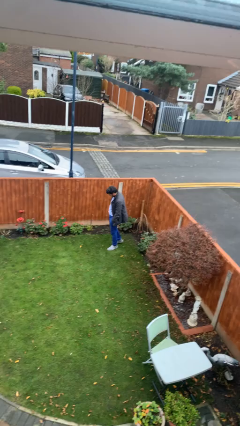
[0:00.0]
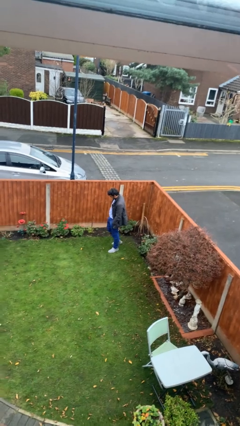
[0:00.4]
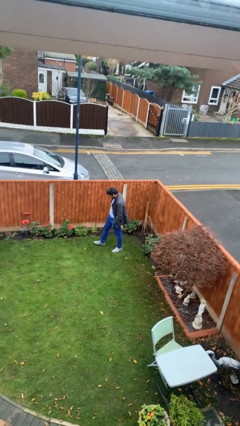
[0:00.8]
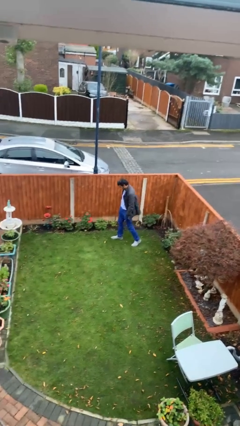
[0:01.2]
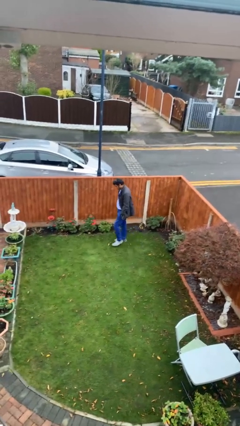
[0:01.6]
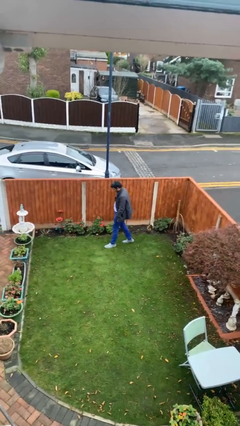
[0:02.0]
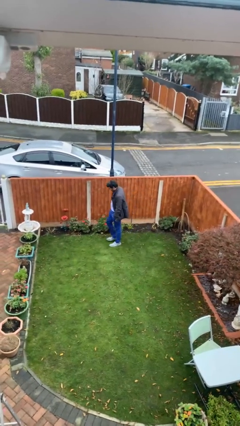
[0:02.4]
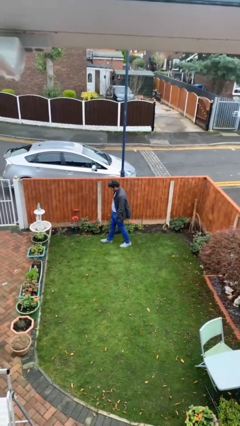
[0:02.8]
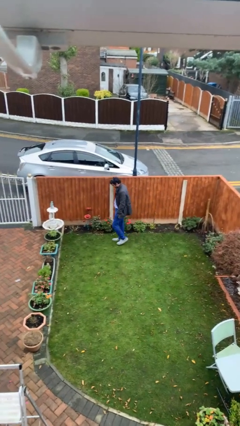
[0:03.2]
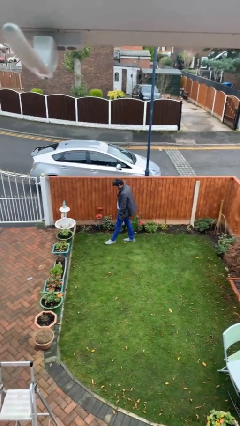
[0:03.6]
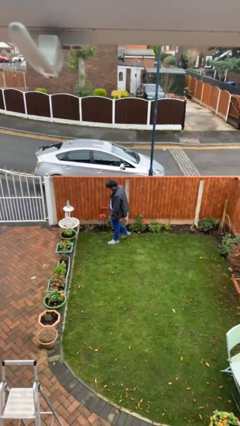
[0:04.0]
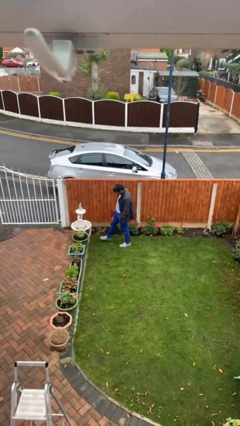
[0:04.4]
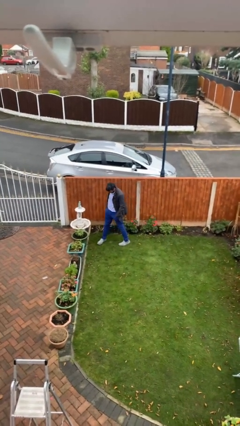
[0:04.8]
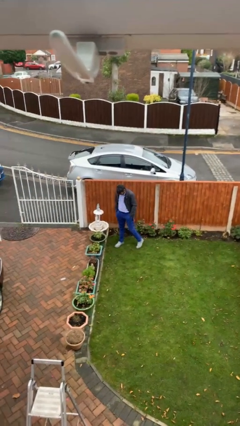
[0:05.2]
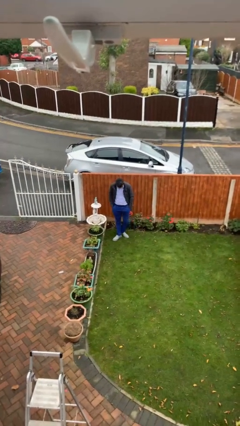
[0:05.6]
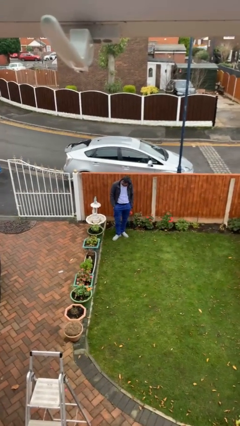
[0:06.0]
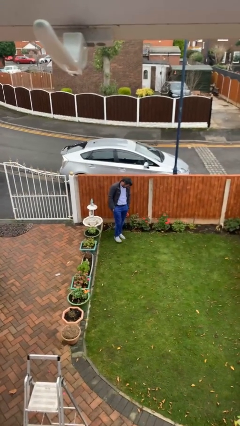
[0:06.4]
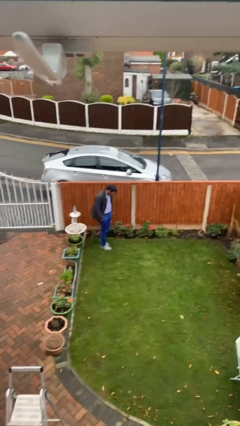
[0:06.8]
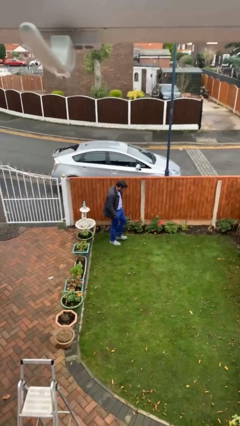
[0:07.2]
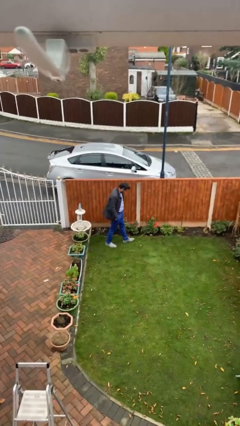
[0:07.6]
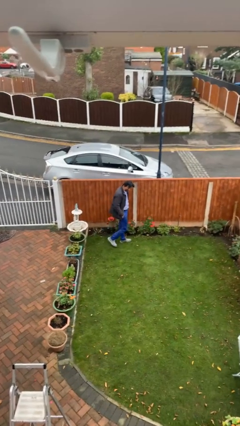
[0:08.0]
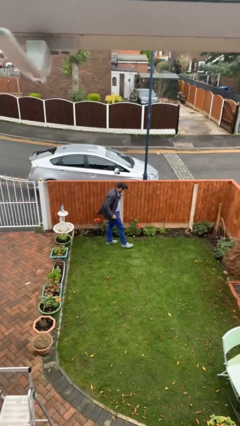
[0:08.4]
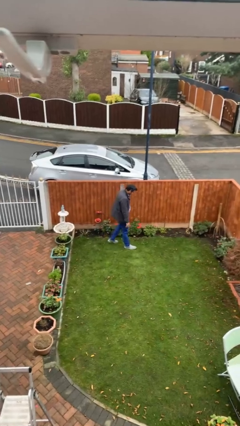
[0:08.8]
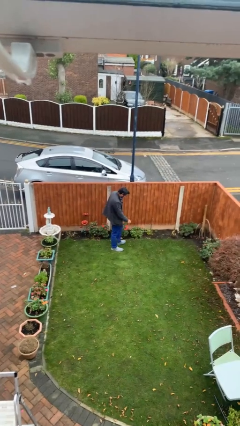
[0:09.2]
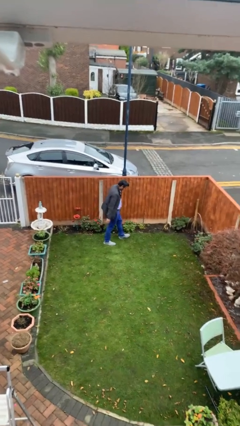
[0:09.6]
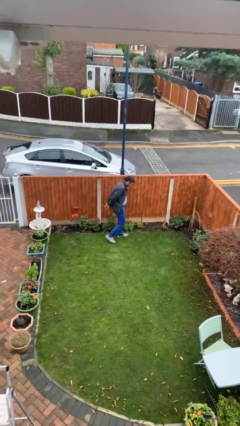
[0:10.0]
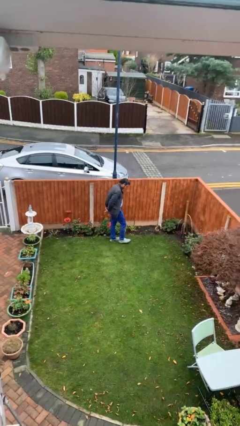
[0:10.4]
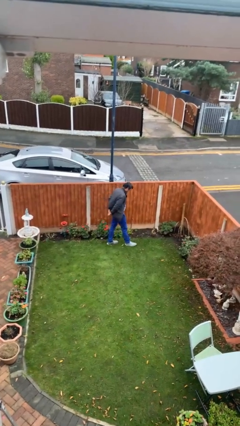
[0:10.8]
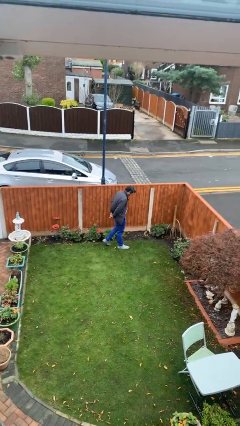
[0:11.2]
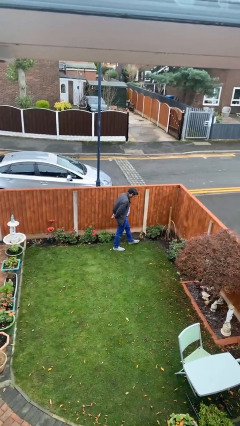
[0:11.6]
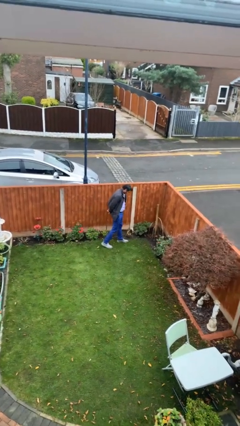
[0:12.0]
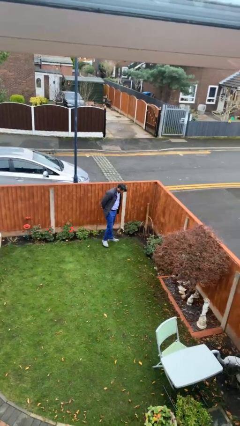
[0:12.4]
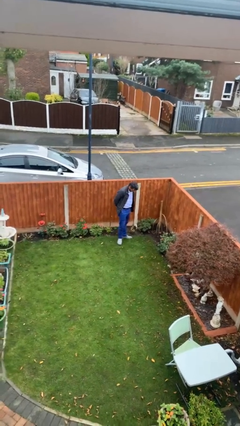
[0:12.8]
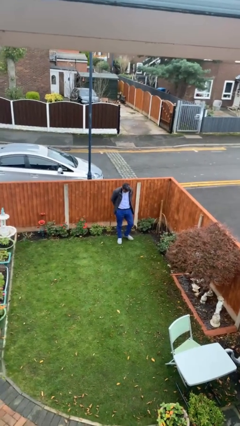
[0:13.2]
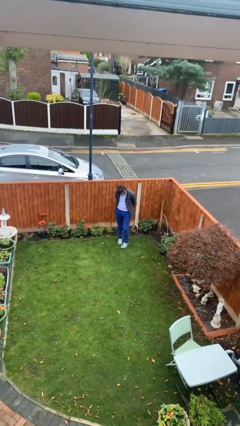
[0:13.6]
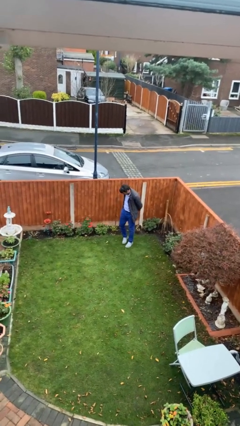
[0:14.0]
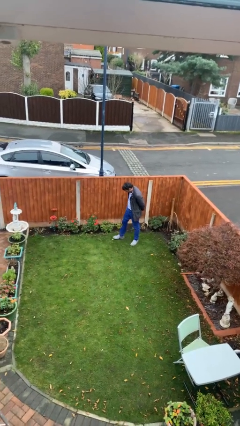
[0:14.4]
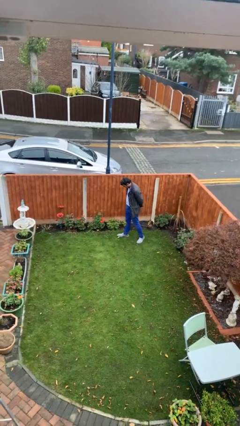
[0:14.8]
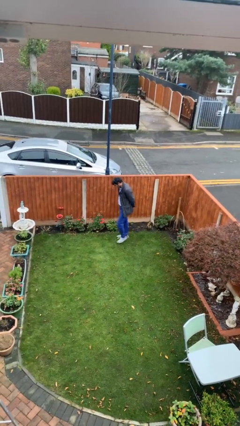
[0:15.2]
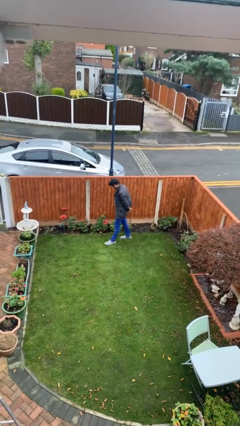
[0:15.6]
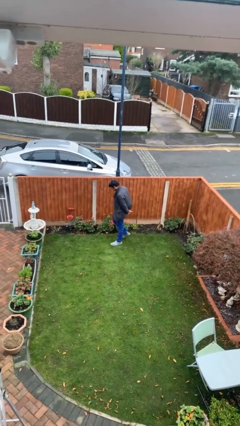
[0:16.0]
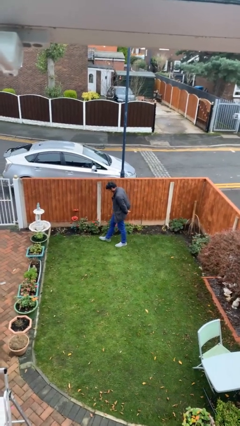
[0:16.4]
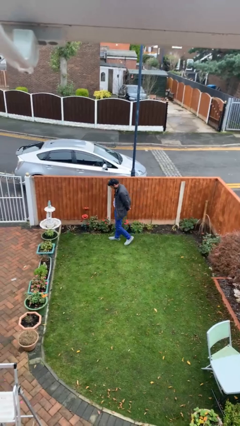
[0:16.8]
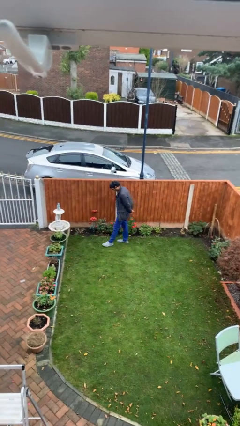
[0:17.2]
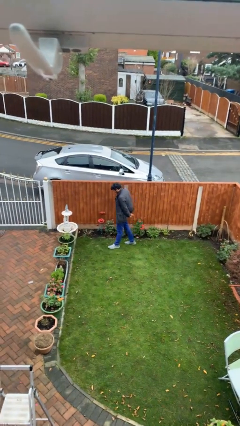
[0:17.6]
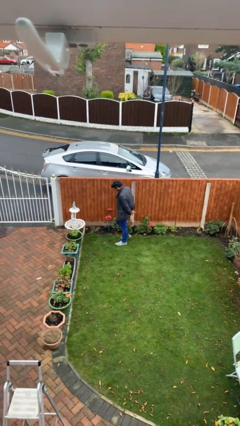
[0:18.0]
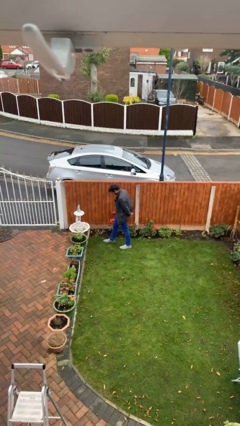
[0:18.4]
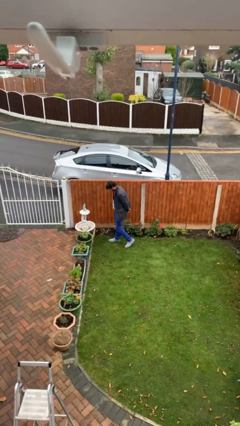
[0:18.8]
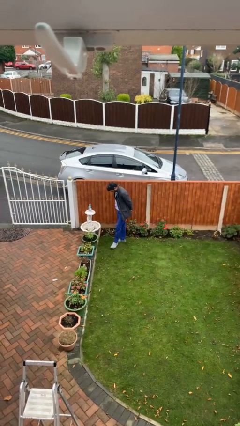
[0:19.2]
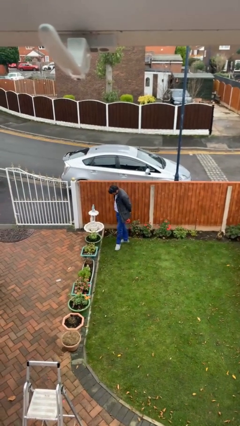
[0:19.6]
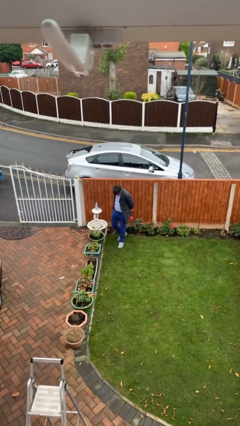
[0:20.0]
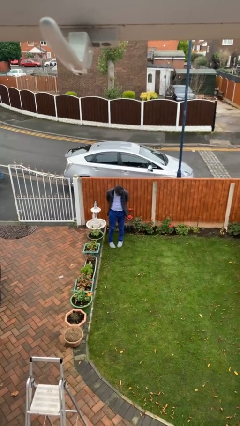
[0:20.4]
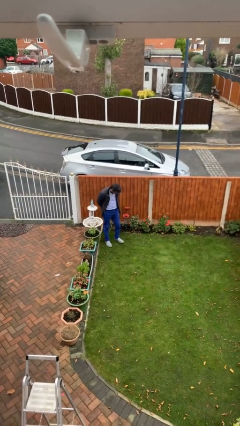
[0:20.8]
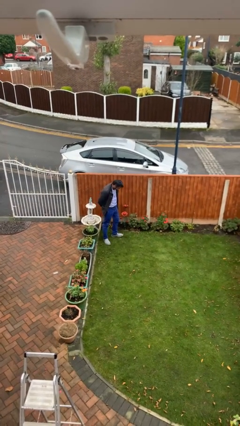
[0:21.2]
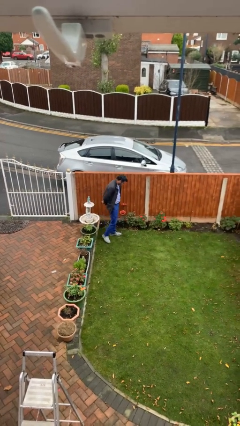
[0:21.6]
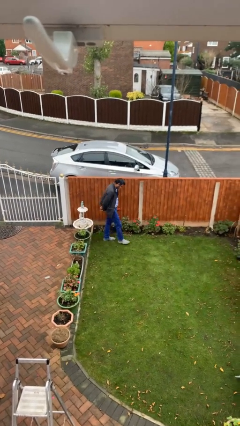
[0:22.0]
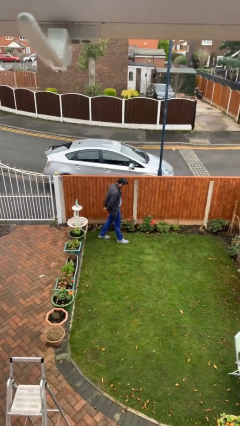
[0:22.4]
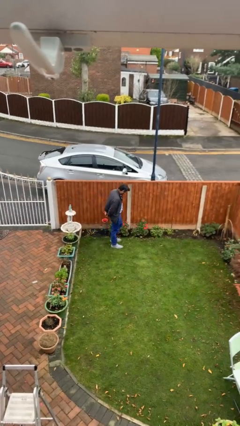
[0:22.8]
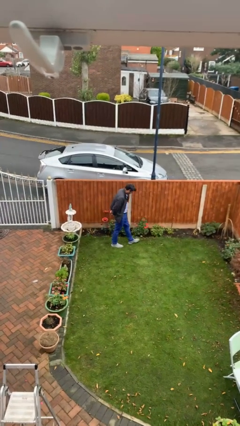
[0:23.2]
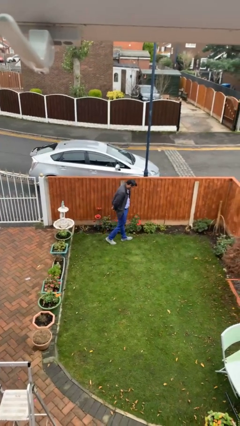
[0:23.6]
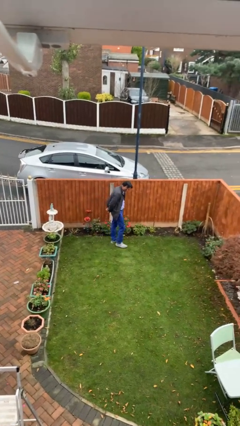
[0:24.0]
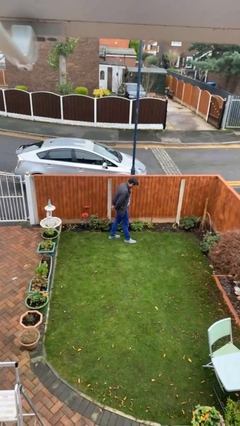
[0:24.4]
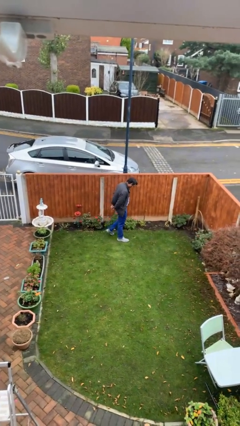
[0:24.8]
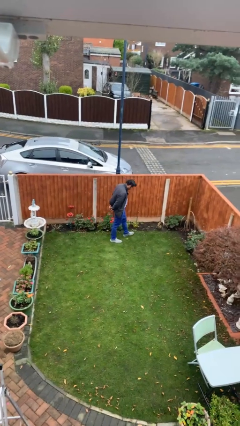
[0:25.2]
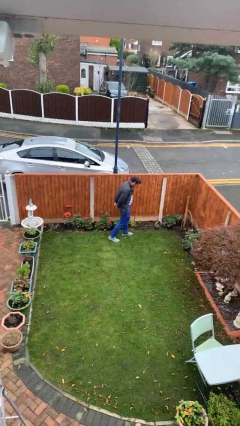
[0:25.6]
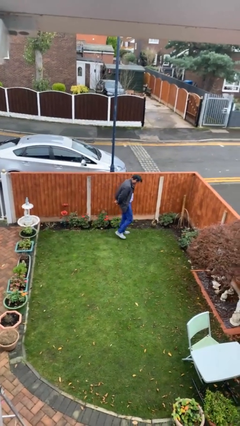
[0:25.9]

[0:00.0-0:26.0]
person walks

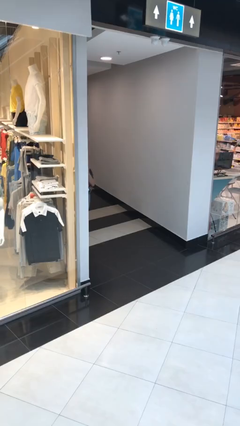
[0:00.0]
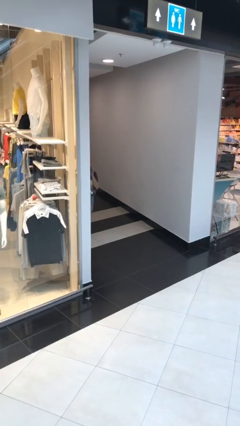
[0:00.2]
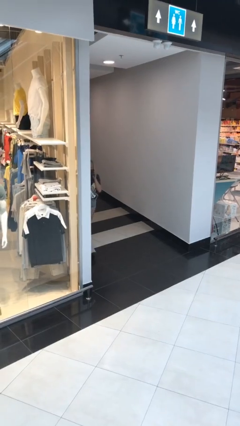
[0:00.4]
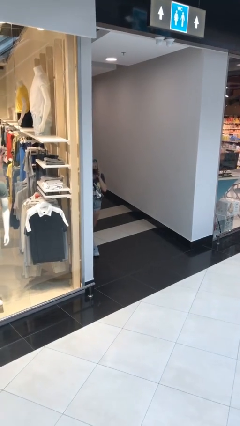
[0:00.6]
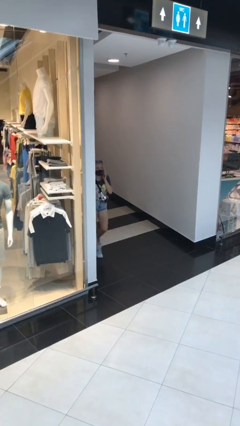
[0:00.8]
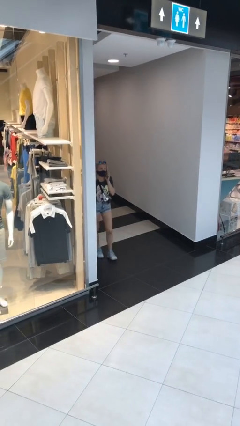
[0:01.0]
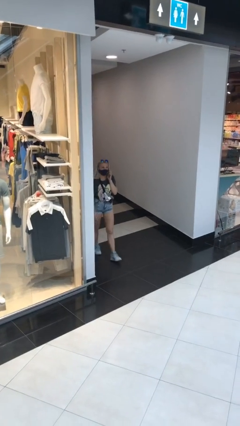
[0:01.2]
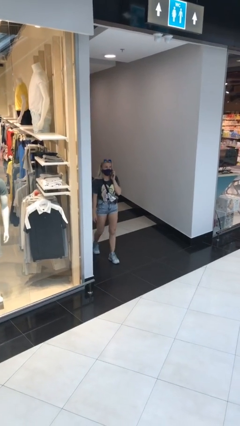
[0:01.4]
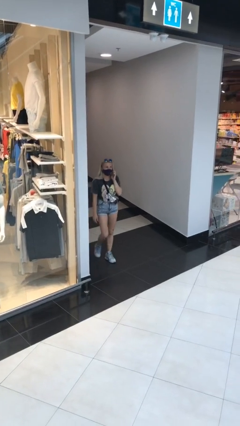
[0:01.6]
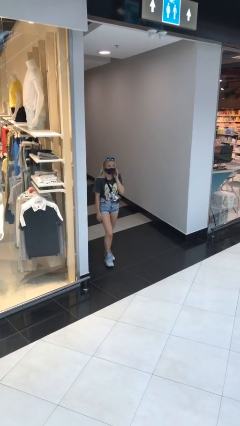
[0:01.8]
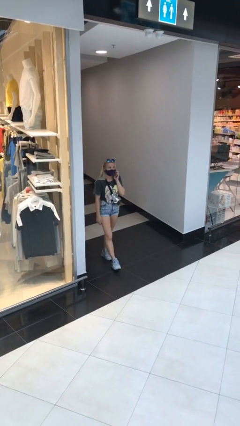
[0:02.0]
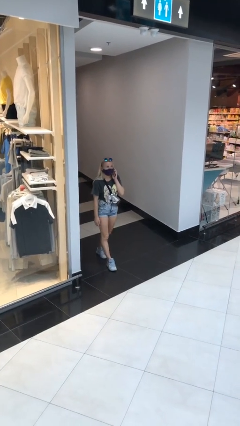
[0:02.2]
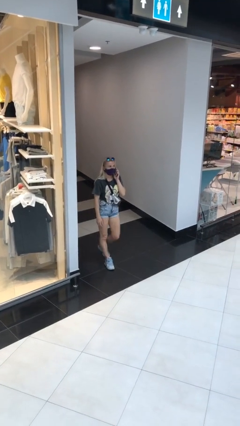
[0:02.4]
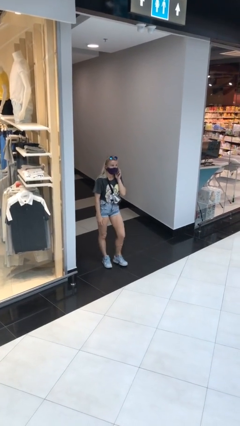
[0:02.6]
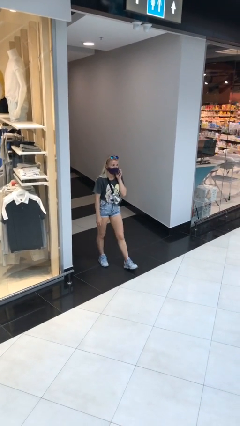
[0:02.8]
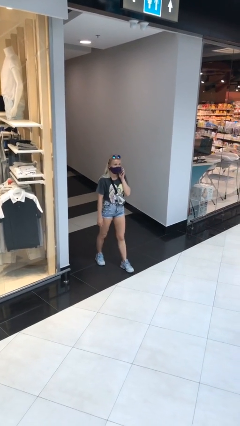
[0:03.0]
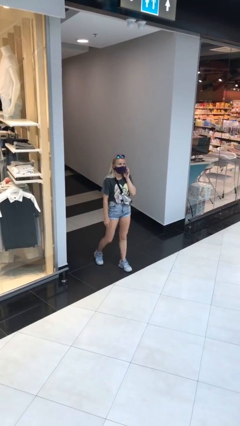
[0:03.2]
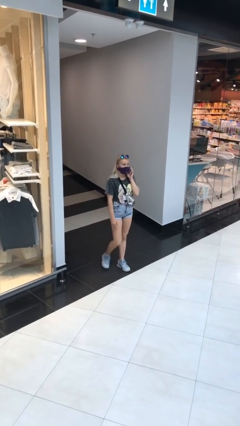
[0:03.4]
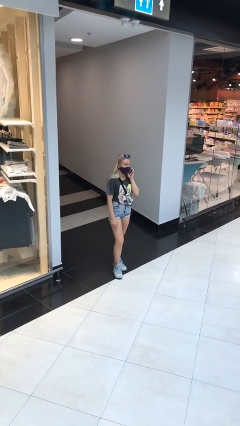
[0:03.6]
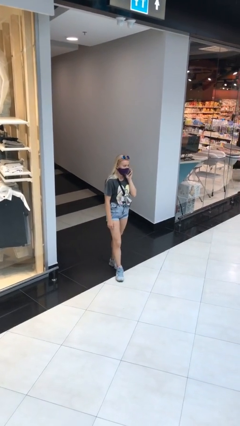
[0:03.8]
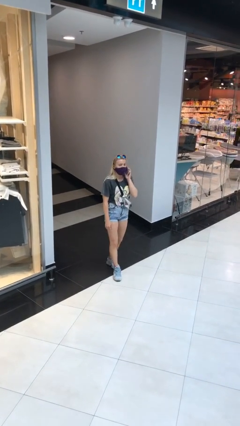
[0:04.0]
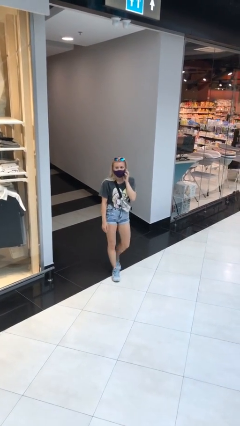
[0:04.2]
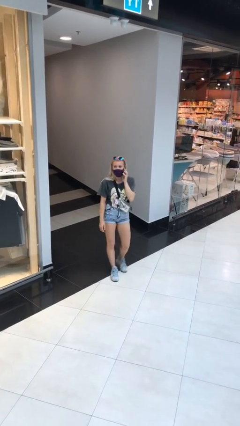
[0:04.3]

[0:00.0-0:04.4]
person enters scene through structure

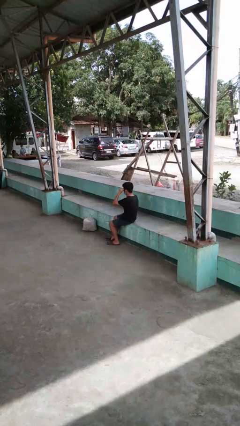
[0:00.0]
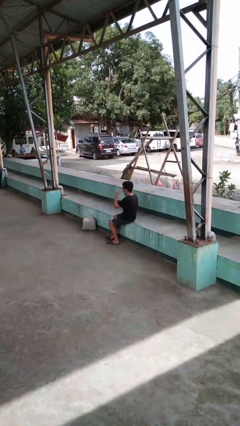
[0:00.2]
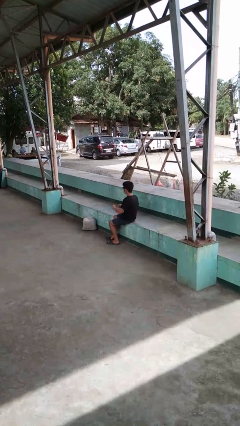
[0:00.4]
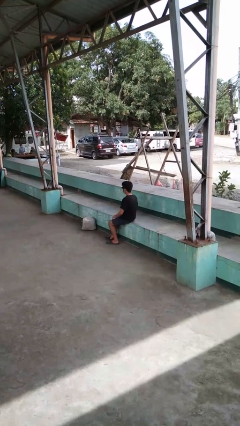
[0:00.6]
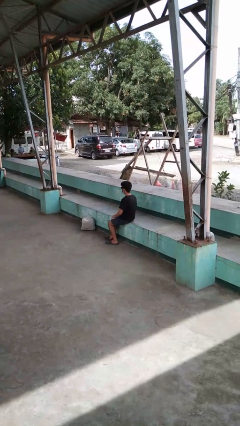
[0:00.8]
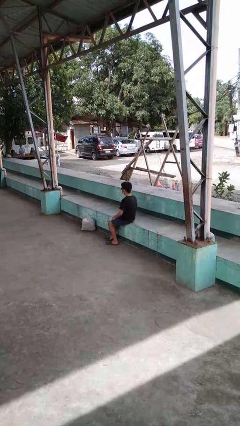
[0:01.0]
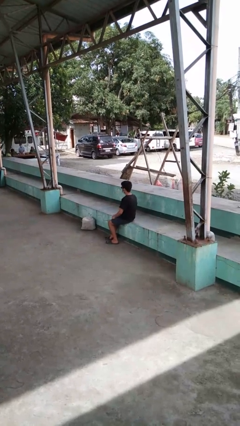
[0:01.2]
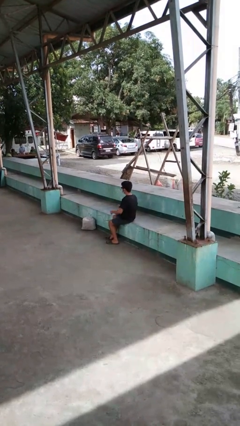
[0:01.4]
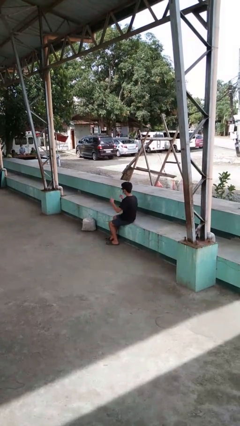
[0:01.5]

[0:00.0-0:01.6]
person brushes hair
